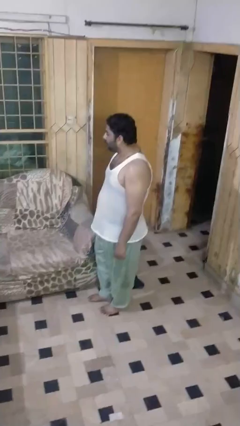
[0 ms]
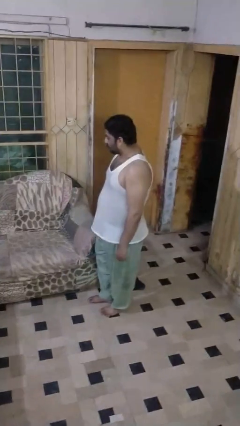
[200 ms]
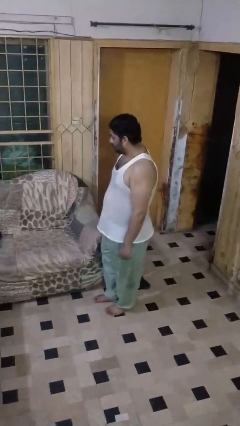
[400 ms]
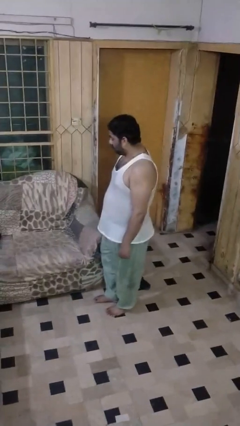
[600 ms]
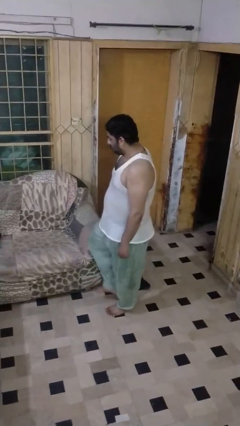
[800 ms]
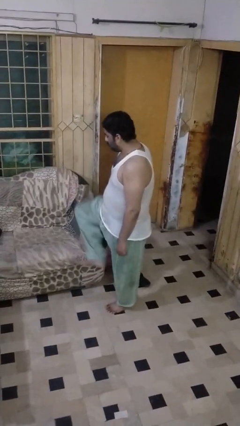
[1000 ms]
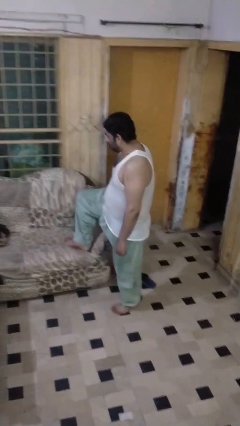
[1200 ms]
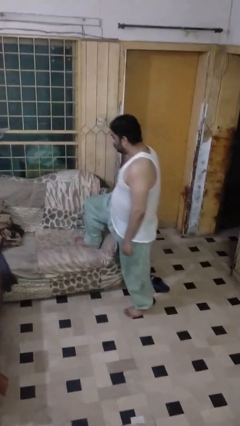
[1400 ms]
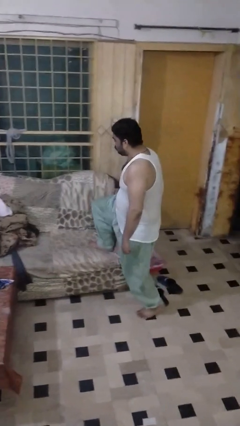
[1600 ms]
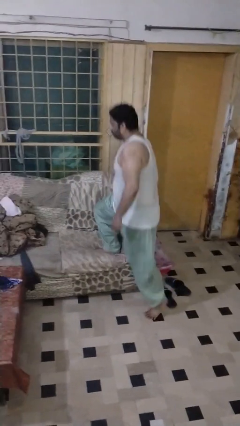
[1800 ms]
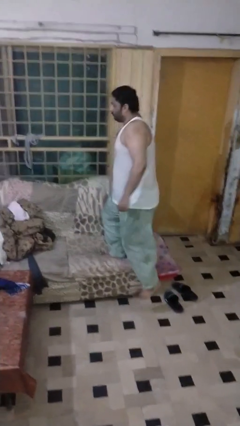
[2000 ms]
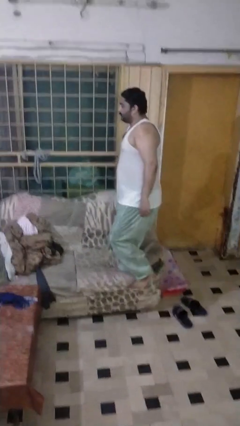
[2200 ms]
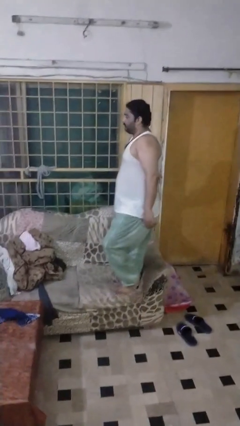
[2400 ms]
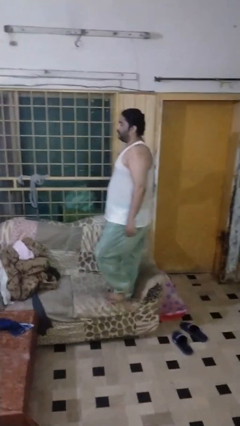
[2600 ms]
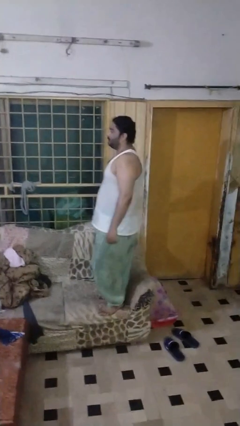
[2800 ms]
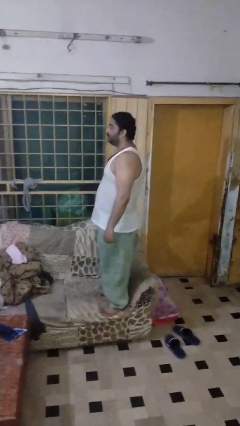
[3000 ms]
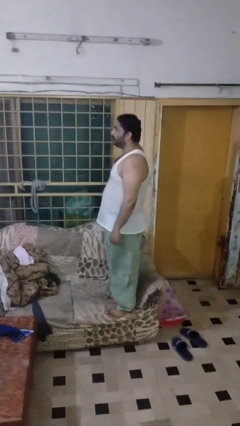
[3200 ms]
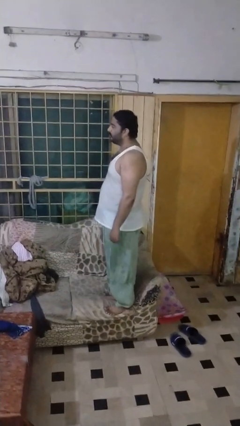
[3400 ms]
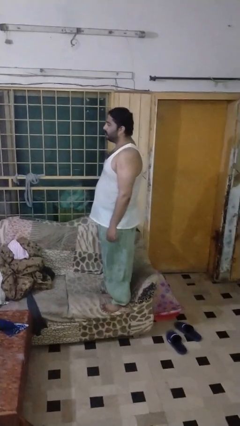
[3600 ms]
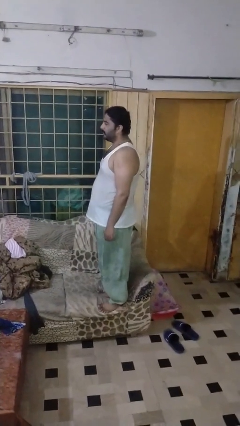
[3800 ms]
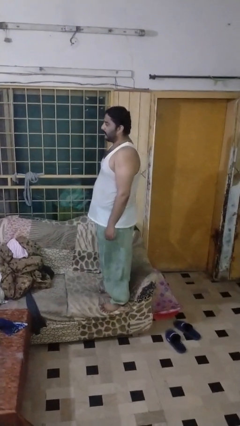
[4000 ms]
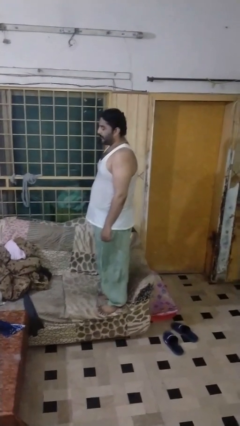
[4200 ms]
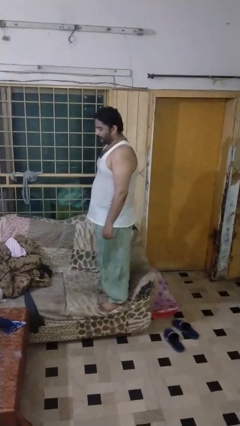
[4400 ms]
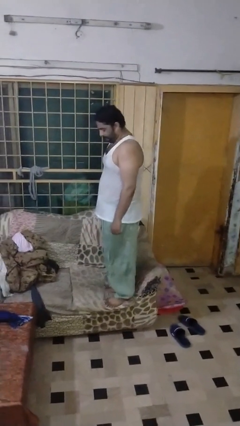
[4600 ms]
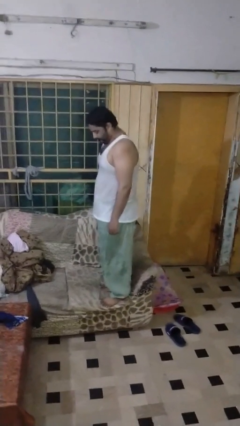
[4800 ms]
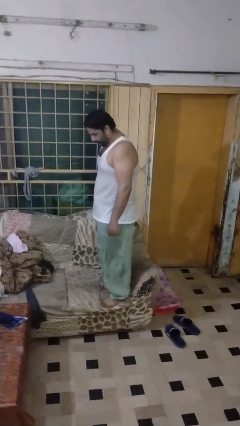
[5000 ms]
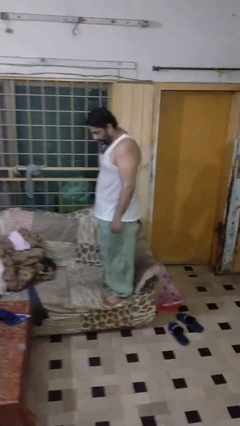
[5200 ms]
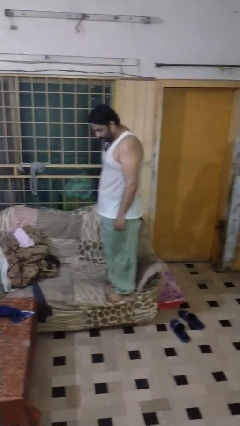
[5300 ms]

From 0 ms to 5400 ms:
person climbs on couch

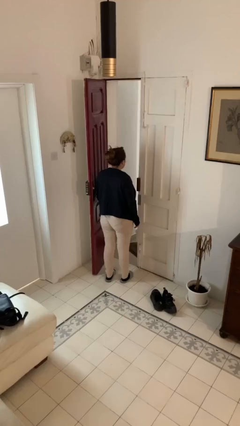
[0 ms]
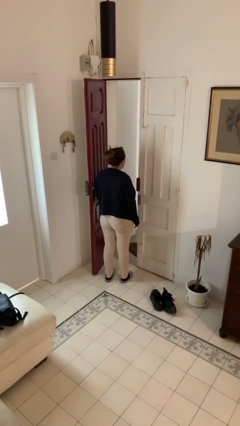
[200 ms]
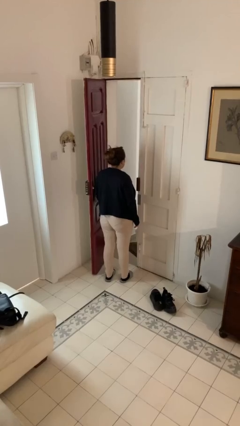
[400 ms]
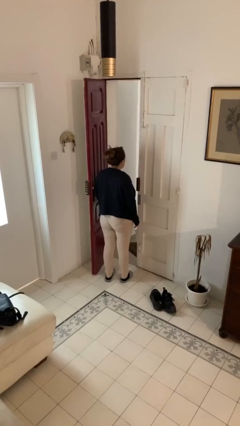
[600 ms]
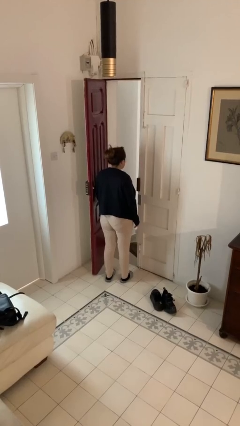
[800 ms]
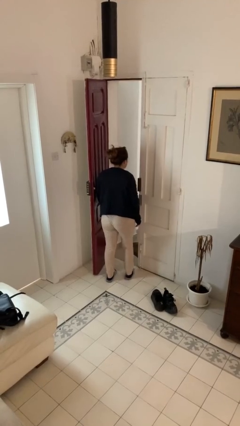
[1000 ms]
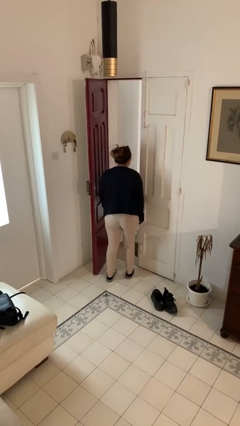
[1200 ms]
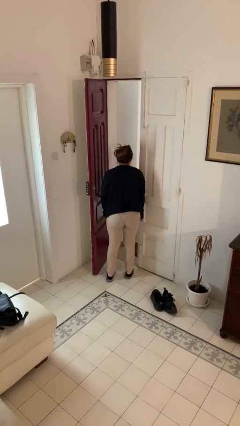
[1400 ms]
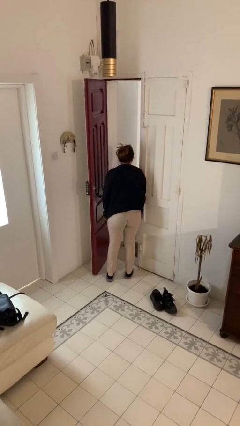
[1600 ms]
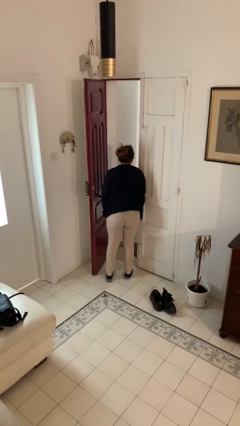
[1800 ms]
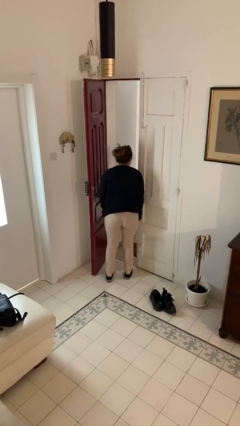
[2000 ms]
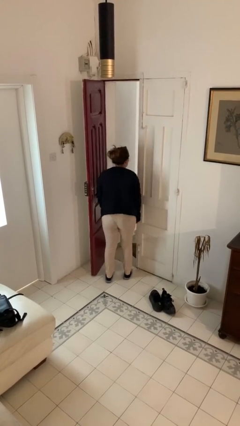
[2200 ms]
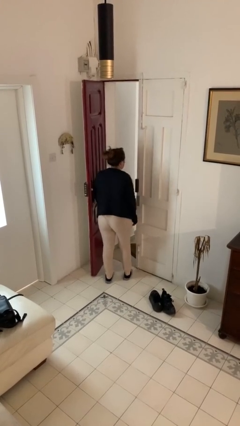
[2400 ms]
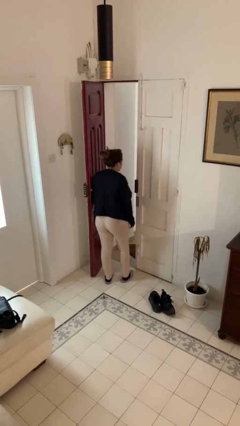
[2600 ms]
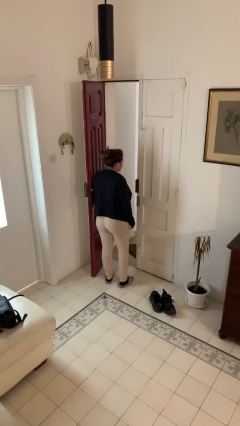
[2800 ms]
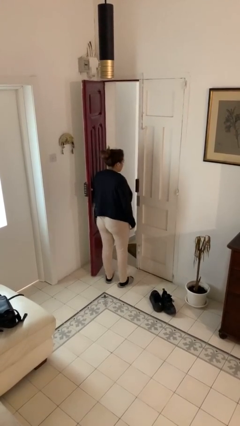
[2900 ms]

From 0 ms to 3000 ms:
person bumps into wall

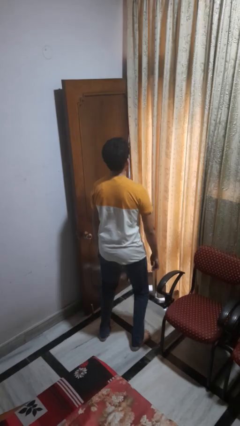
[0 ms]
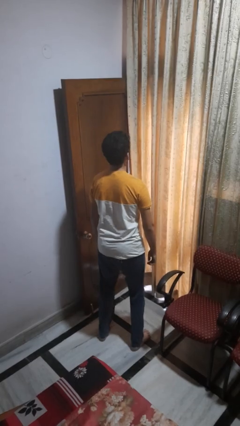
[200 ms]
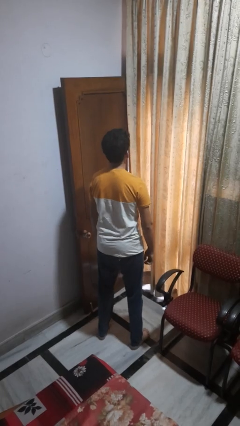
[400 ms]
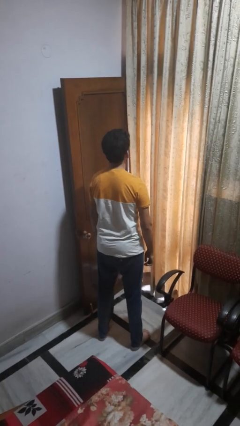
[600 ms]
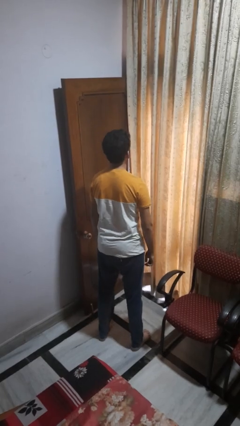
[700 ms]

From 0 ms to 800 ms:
person jumps

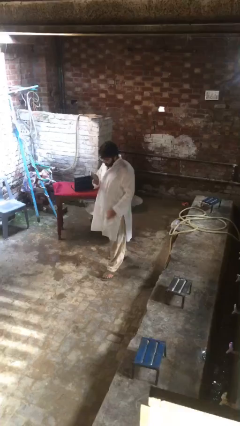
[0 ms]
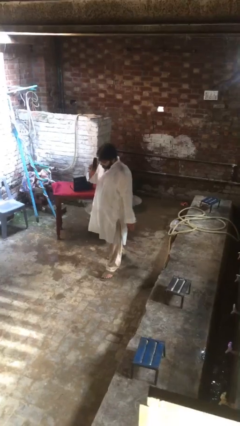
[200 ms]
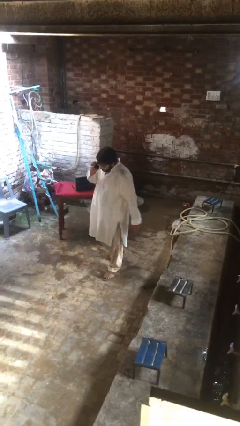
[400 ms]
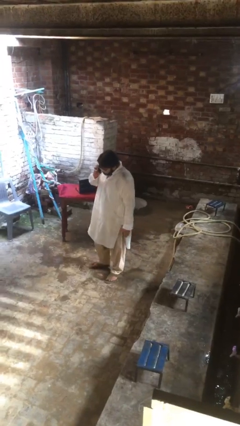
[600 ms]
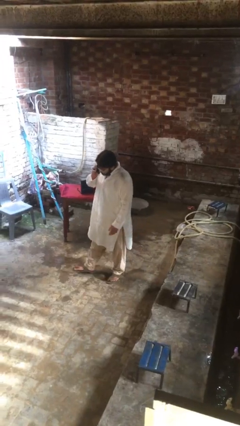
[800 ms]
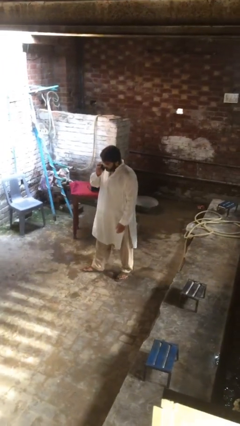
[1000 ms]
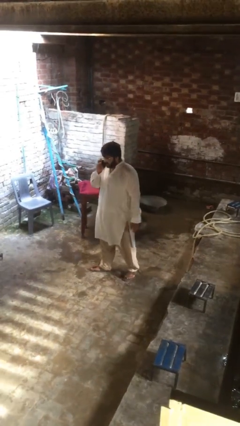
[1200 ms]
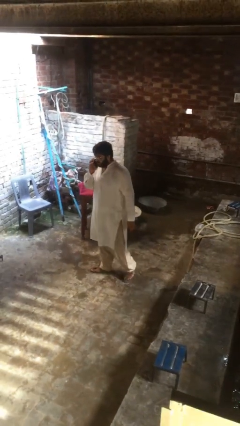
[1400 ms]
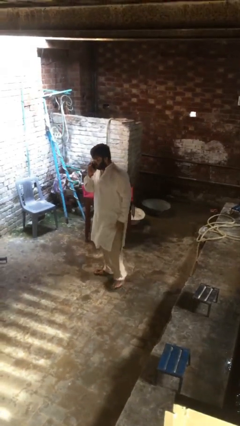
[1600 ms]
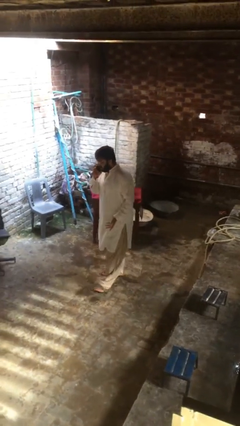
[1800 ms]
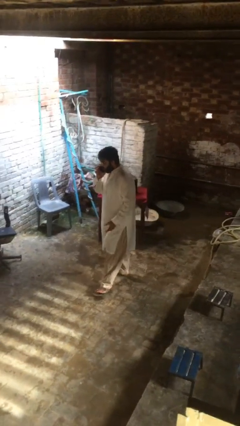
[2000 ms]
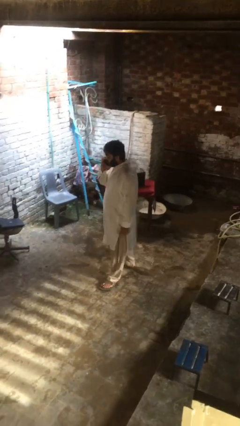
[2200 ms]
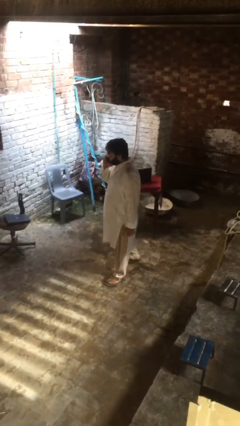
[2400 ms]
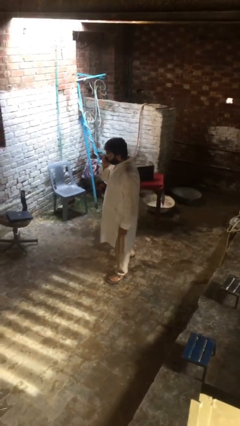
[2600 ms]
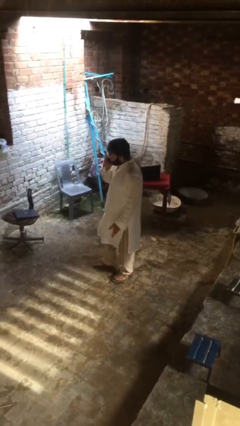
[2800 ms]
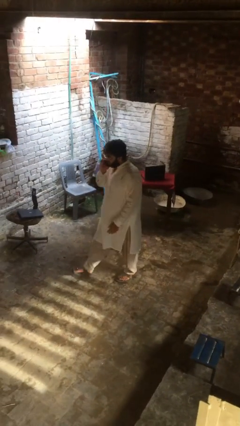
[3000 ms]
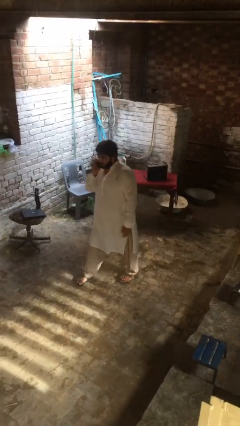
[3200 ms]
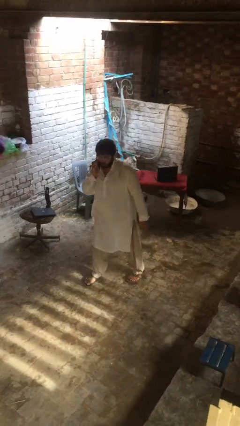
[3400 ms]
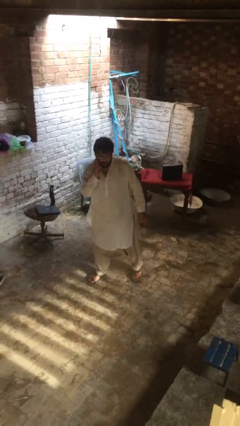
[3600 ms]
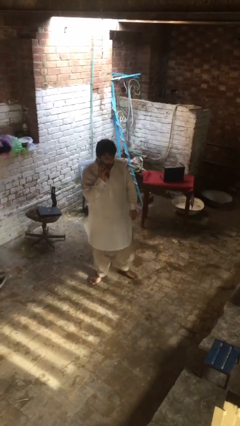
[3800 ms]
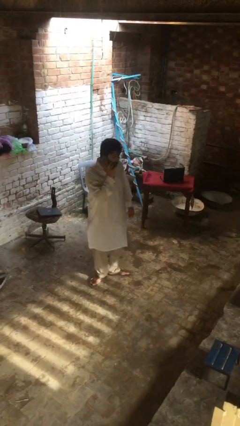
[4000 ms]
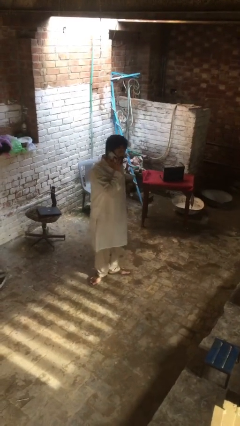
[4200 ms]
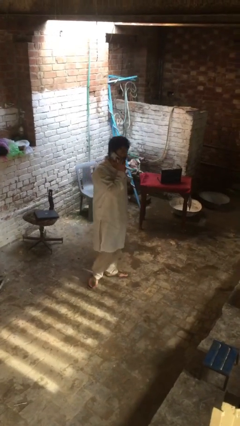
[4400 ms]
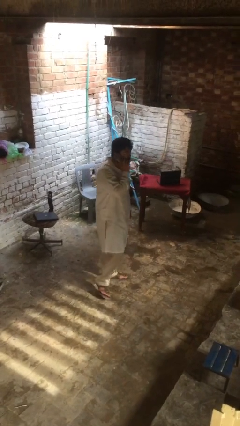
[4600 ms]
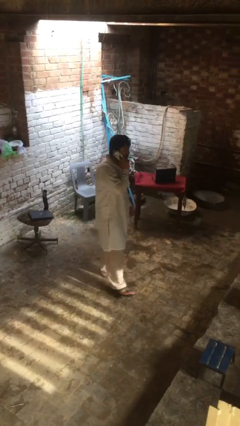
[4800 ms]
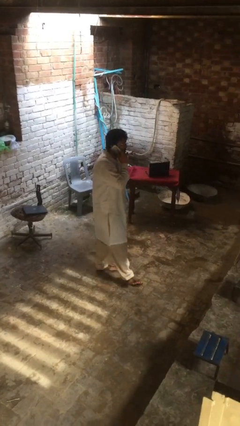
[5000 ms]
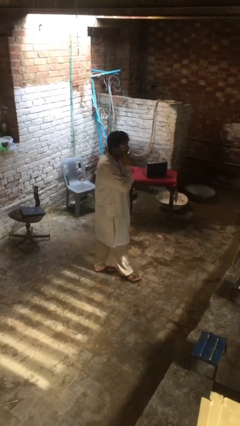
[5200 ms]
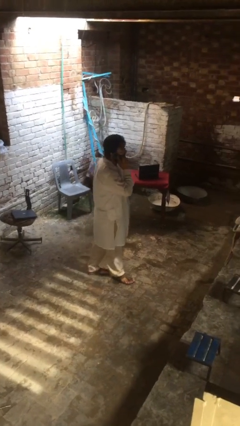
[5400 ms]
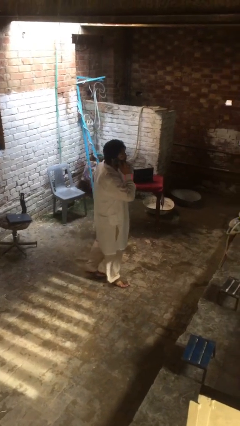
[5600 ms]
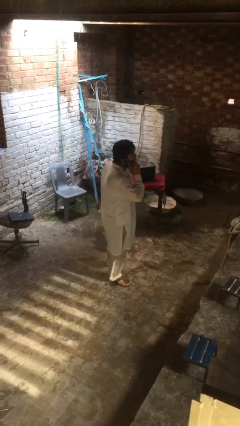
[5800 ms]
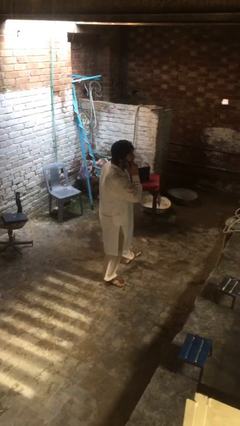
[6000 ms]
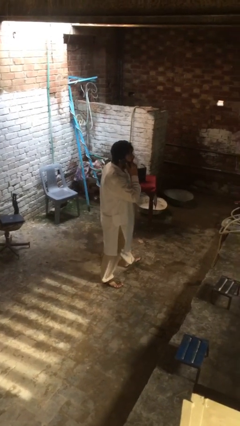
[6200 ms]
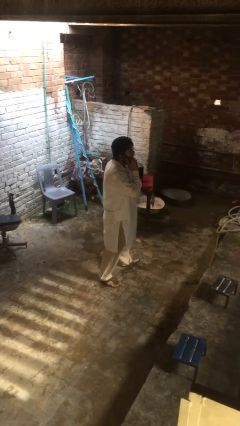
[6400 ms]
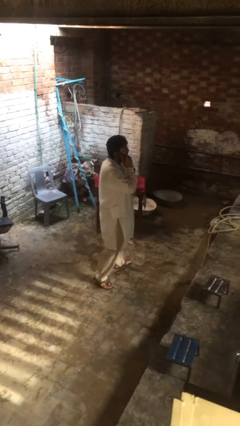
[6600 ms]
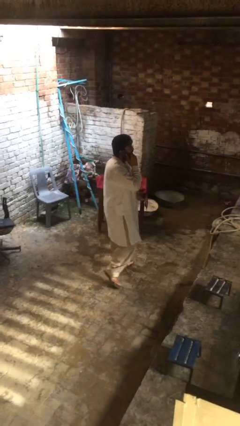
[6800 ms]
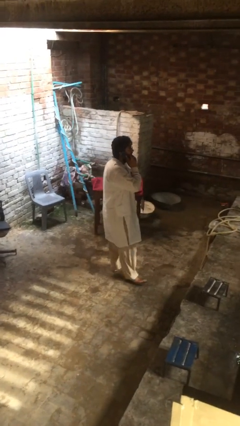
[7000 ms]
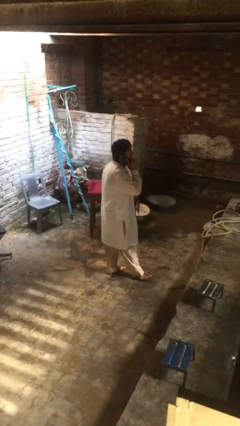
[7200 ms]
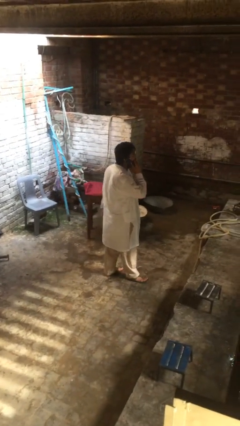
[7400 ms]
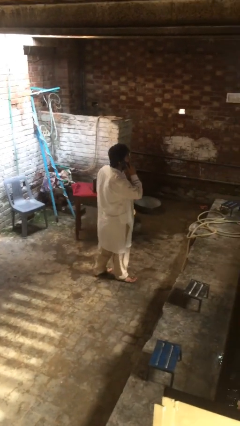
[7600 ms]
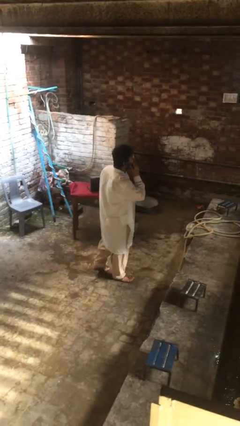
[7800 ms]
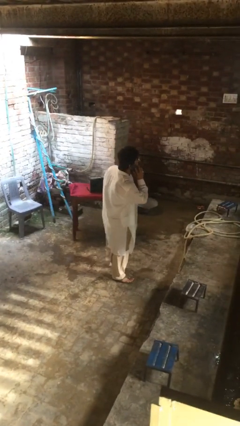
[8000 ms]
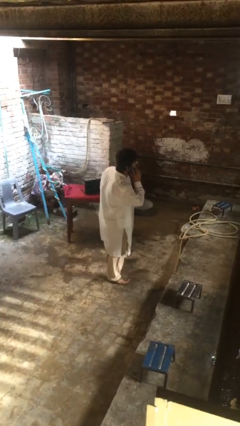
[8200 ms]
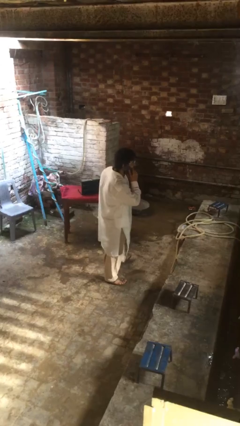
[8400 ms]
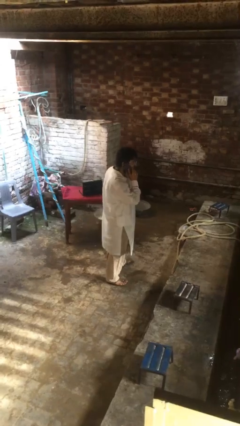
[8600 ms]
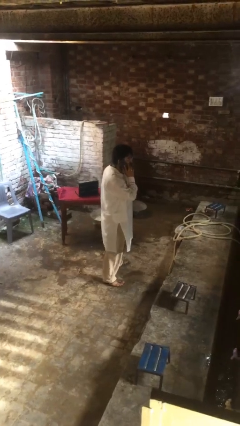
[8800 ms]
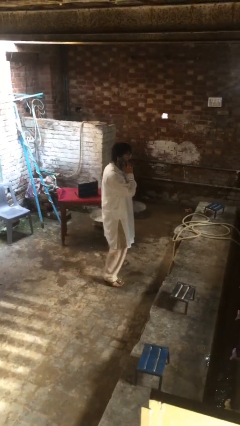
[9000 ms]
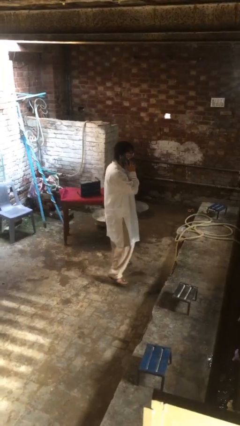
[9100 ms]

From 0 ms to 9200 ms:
person talks on phone
